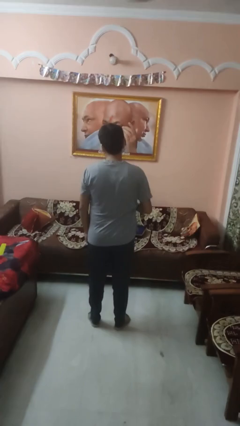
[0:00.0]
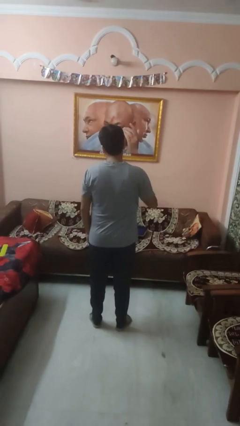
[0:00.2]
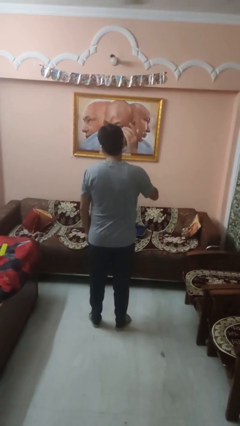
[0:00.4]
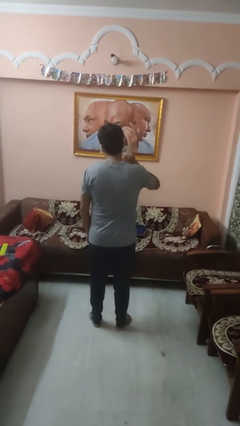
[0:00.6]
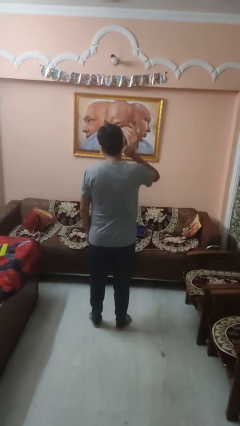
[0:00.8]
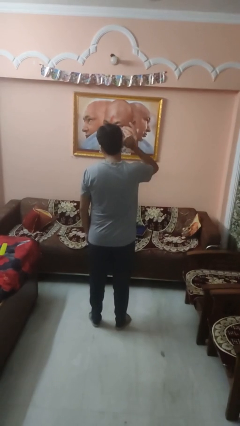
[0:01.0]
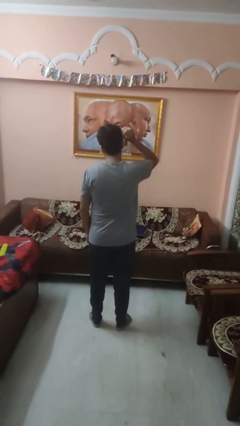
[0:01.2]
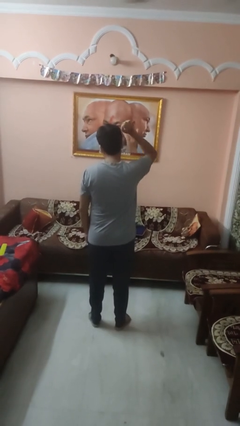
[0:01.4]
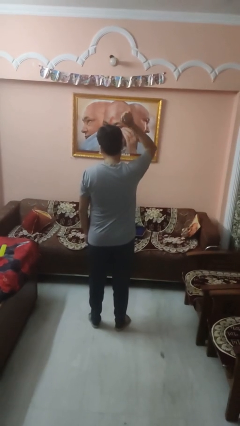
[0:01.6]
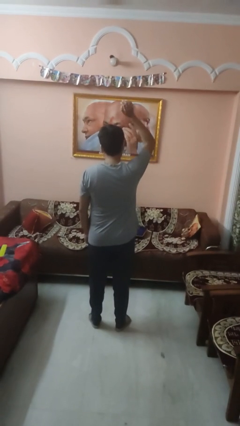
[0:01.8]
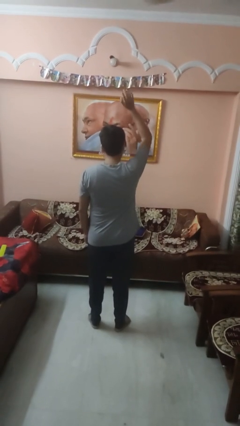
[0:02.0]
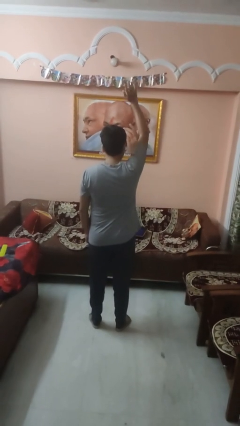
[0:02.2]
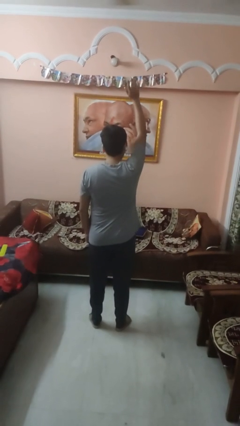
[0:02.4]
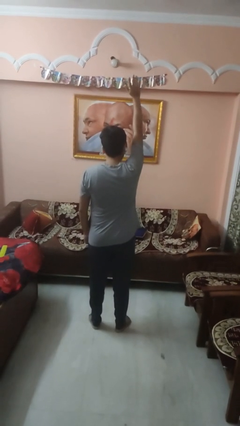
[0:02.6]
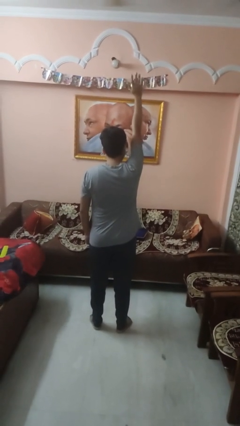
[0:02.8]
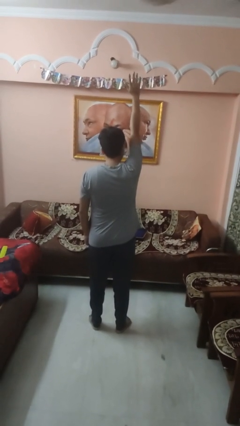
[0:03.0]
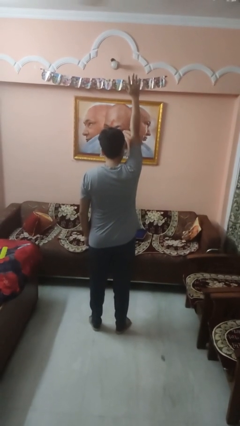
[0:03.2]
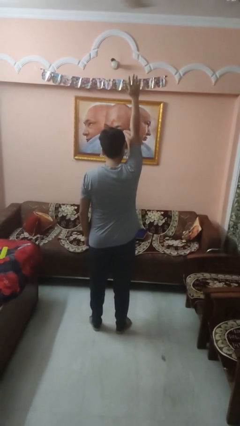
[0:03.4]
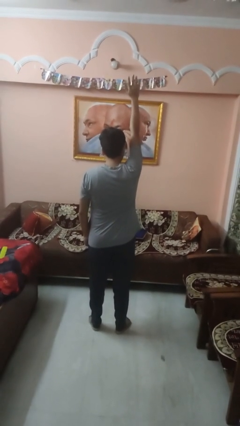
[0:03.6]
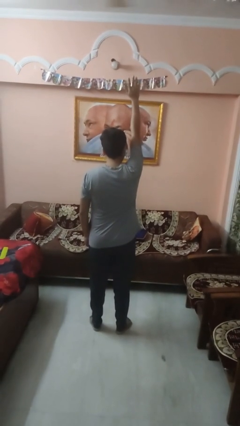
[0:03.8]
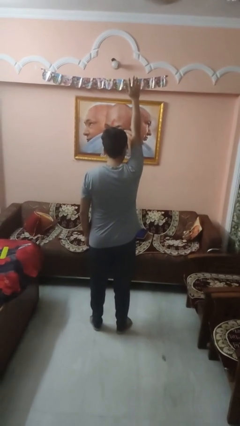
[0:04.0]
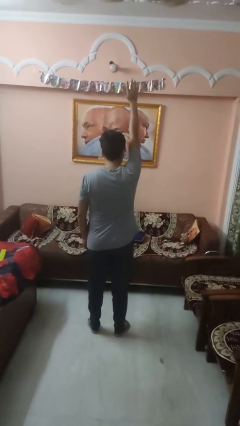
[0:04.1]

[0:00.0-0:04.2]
person gestures raise hand

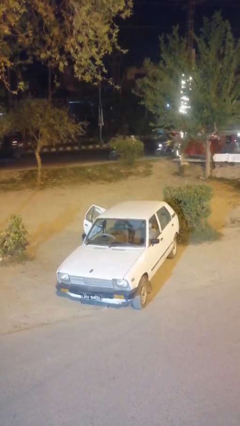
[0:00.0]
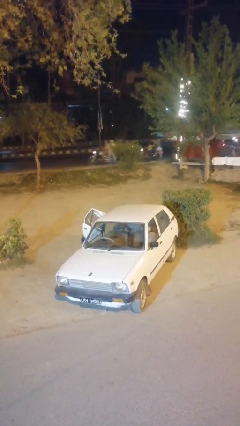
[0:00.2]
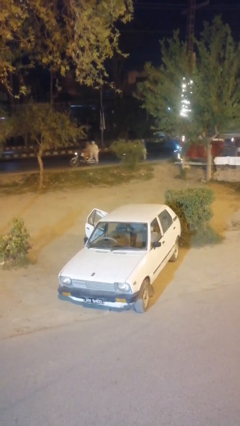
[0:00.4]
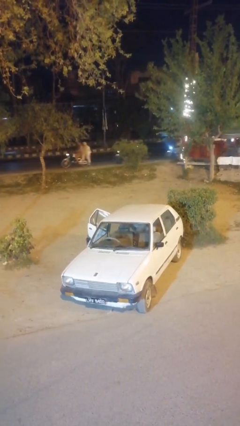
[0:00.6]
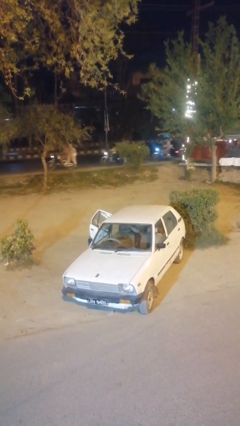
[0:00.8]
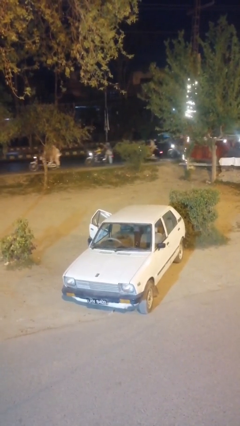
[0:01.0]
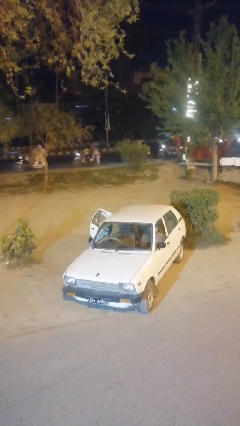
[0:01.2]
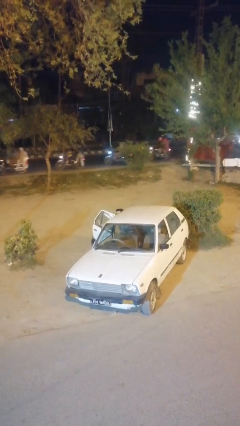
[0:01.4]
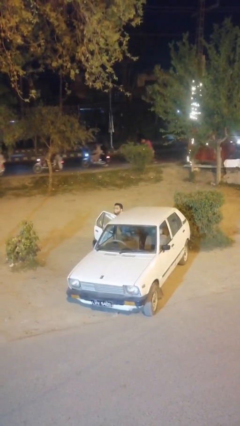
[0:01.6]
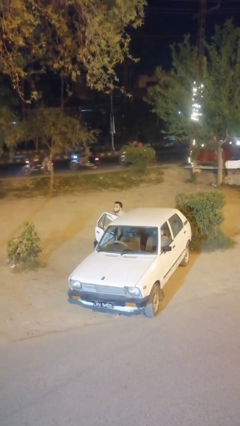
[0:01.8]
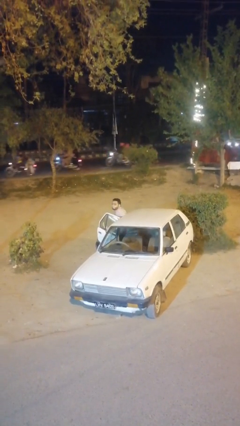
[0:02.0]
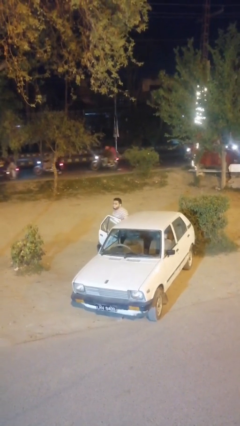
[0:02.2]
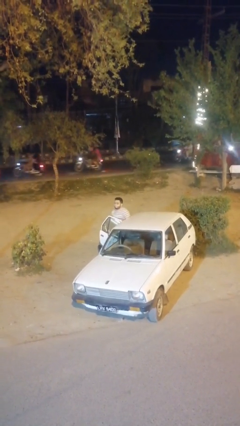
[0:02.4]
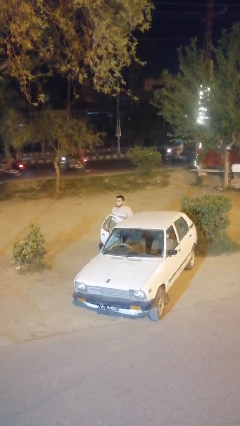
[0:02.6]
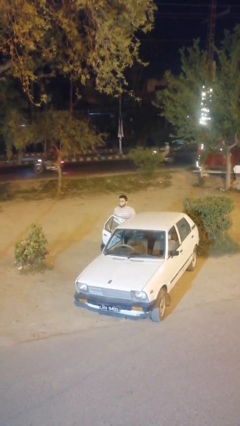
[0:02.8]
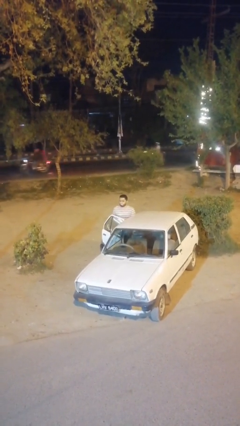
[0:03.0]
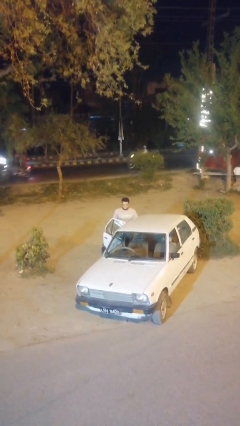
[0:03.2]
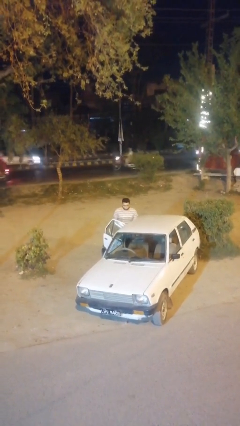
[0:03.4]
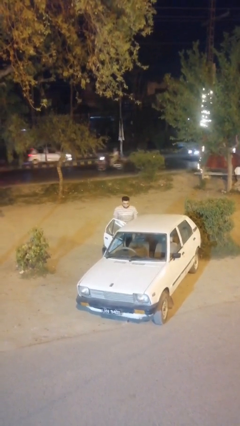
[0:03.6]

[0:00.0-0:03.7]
person exits car

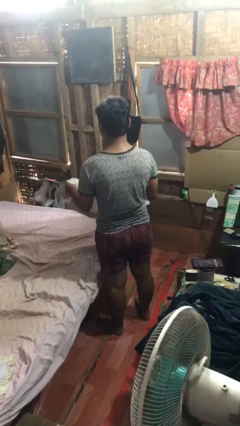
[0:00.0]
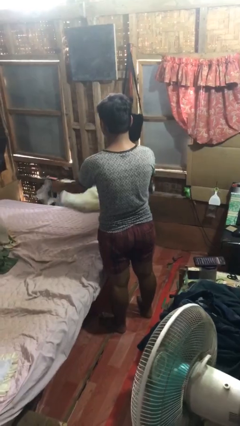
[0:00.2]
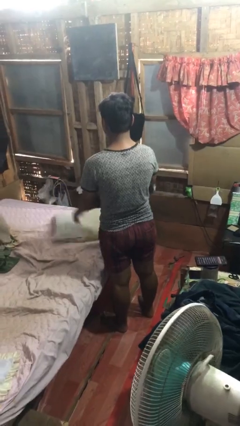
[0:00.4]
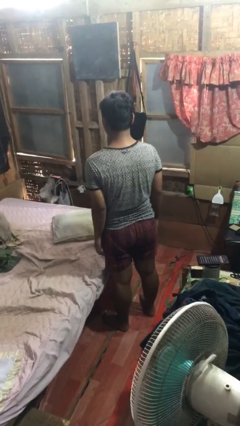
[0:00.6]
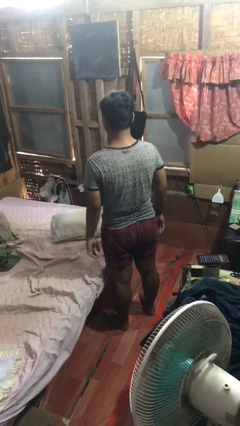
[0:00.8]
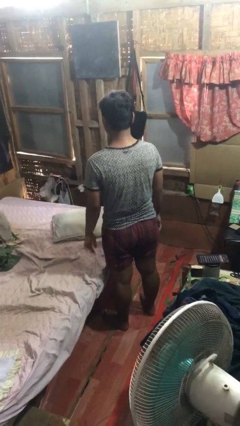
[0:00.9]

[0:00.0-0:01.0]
person puts down object on bed

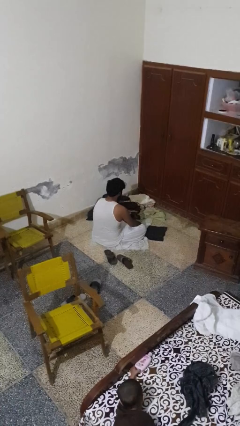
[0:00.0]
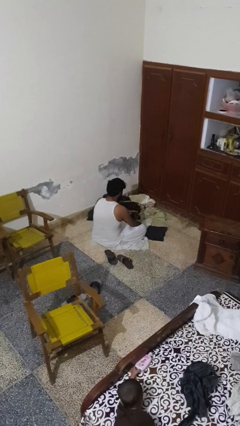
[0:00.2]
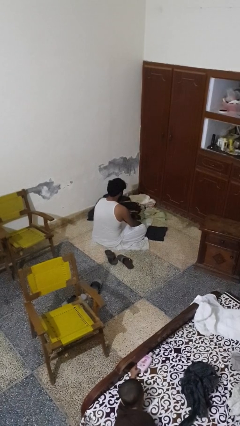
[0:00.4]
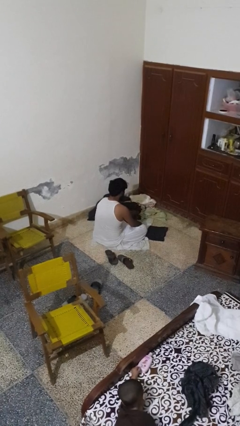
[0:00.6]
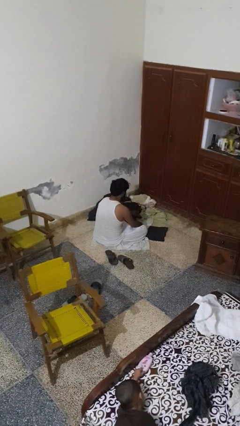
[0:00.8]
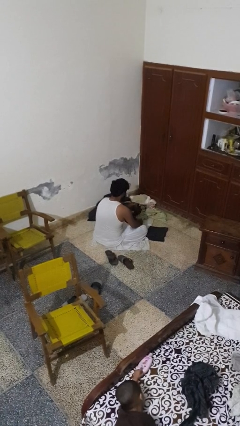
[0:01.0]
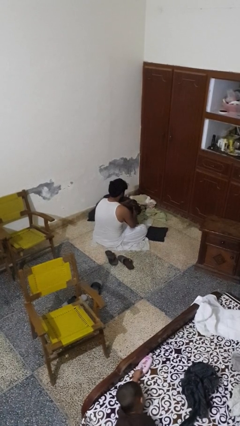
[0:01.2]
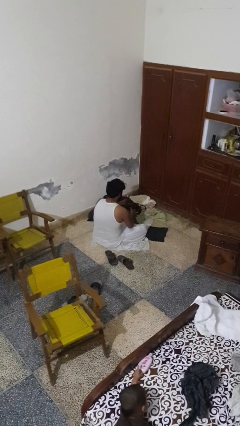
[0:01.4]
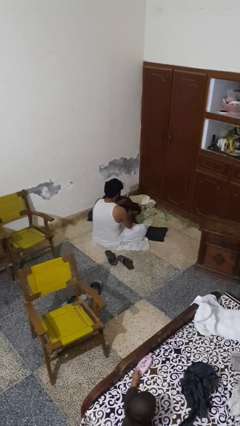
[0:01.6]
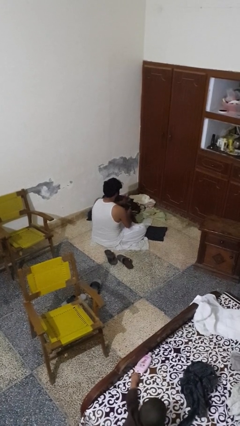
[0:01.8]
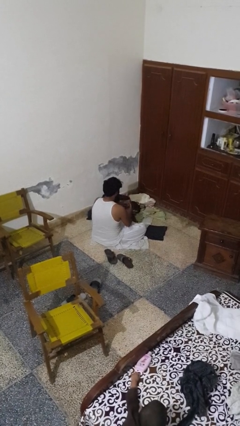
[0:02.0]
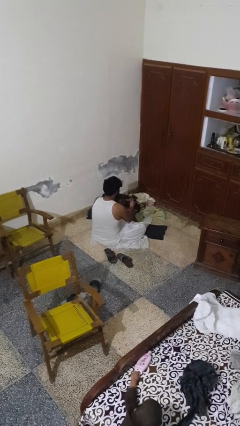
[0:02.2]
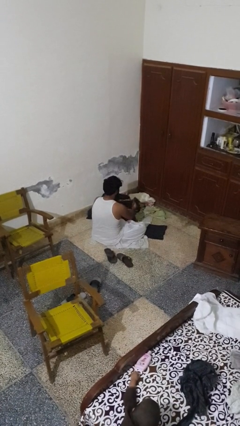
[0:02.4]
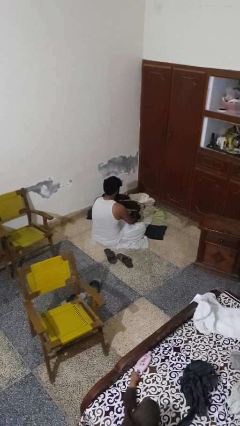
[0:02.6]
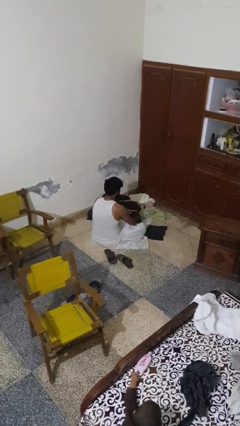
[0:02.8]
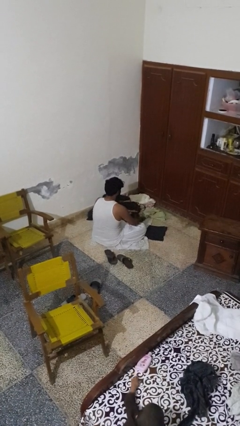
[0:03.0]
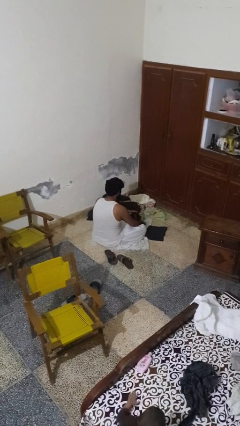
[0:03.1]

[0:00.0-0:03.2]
person folds socks

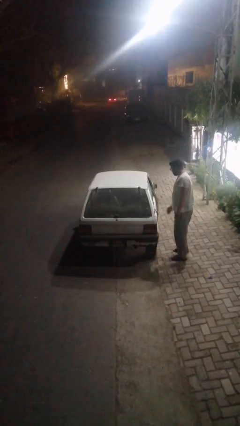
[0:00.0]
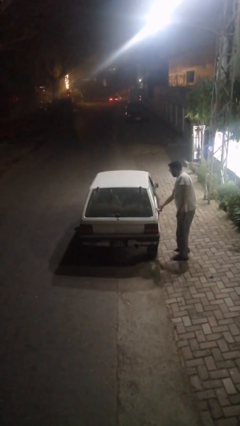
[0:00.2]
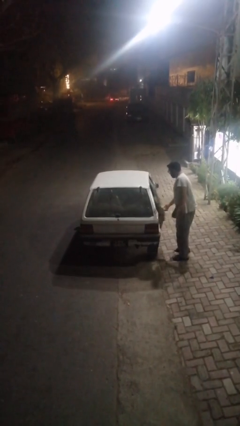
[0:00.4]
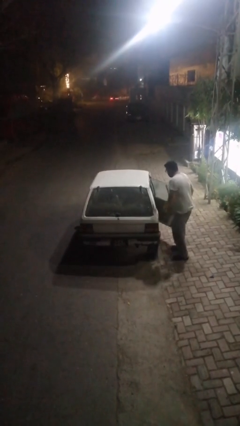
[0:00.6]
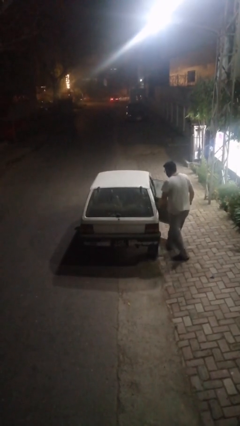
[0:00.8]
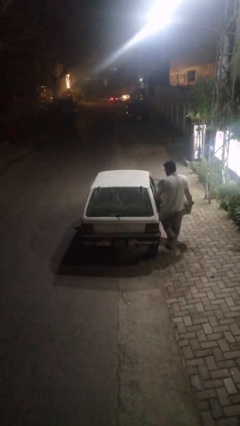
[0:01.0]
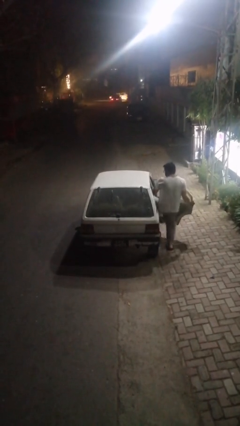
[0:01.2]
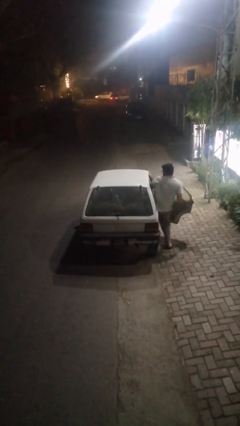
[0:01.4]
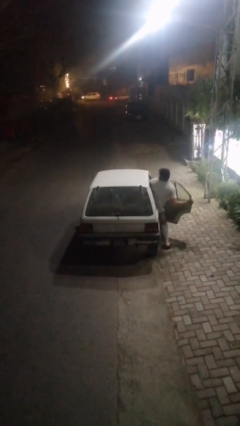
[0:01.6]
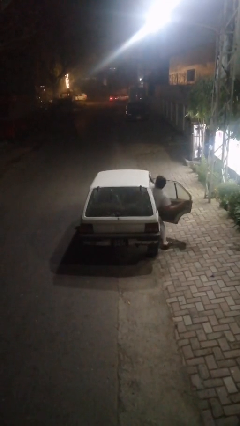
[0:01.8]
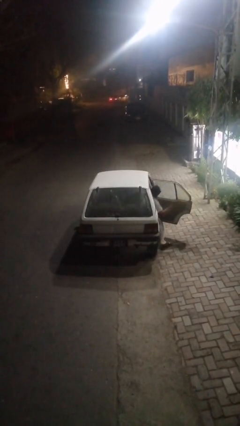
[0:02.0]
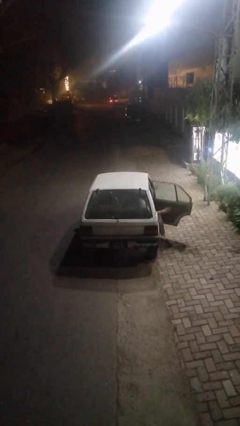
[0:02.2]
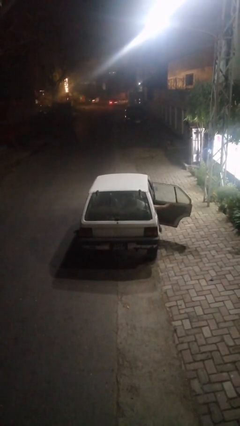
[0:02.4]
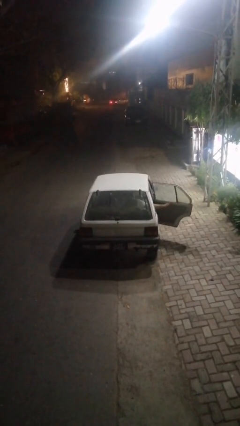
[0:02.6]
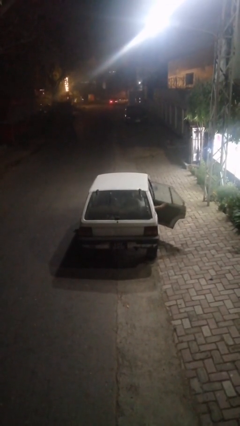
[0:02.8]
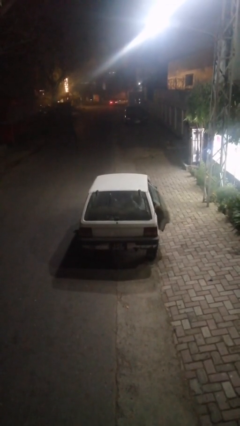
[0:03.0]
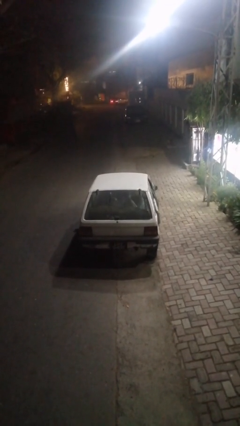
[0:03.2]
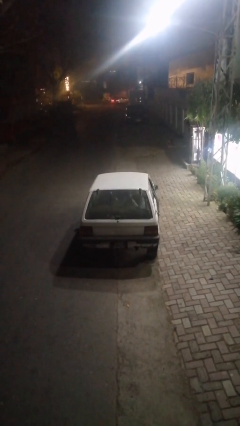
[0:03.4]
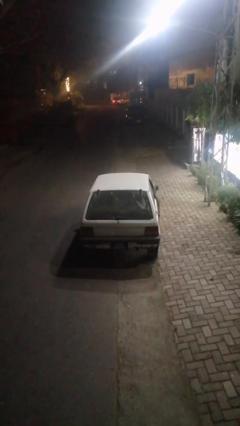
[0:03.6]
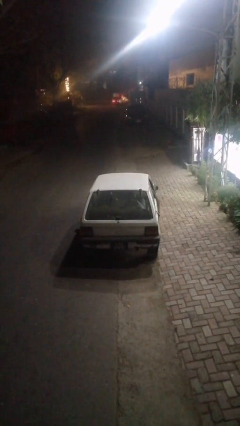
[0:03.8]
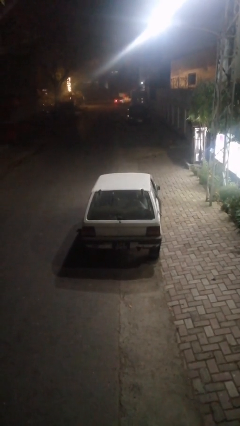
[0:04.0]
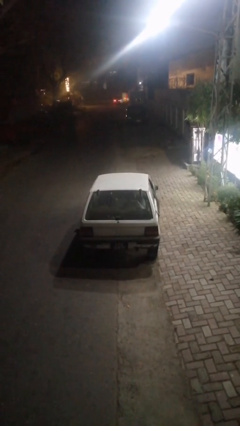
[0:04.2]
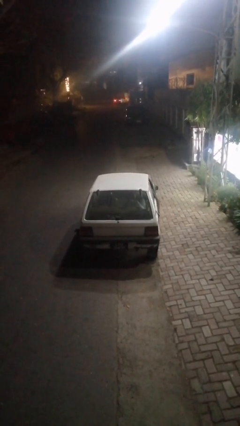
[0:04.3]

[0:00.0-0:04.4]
car picks up person

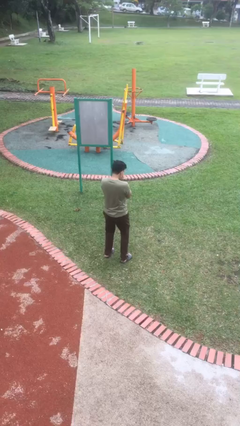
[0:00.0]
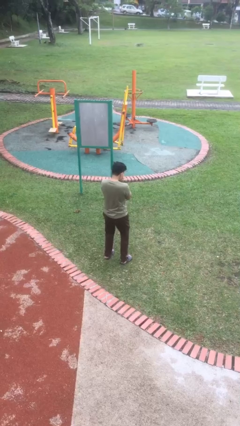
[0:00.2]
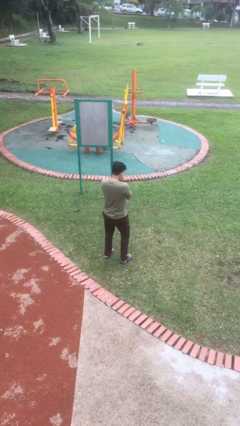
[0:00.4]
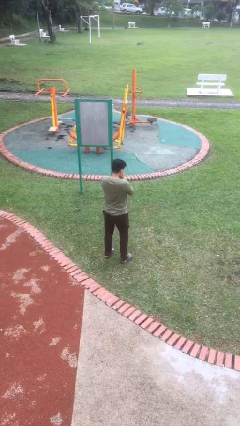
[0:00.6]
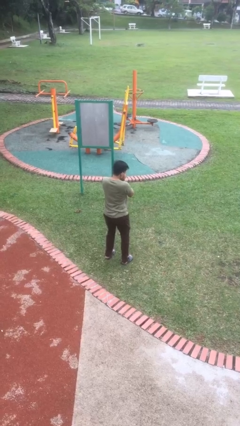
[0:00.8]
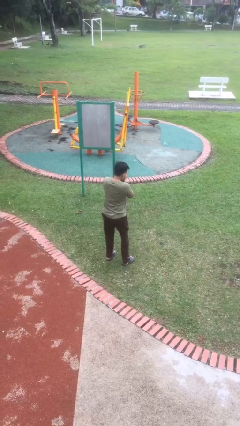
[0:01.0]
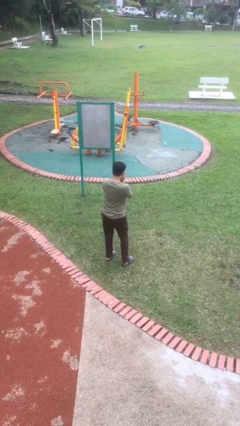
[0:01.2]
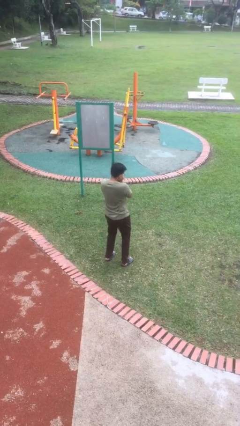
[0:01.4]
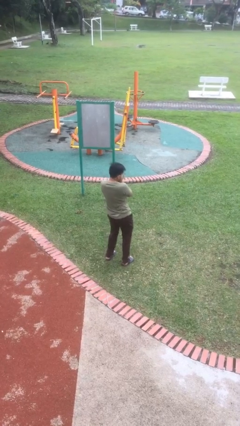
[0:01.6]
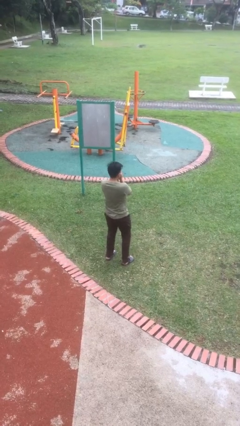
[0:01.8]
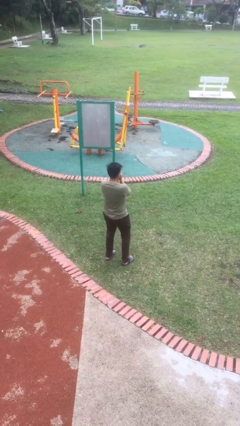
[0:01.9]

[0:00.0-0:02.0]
person wiggles hips
